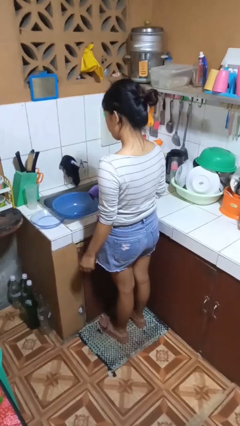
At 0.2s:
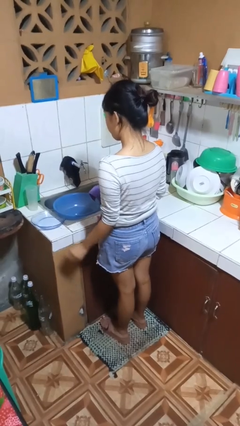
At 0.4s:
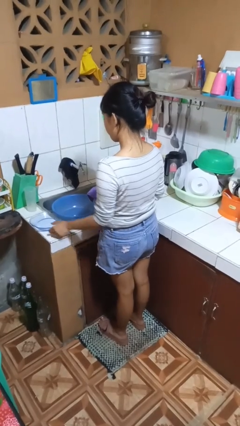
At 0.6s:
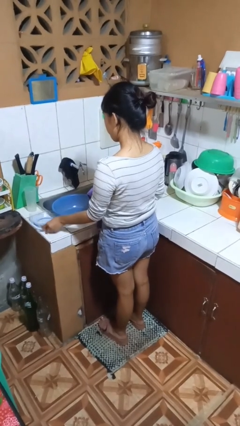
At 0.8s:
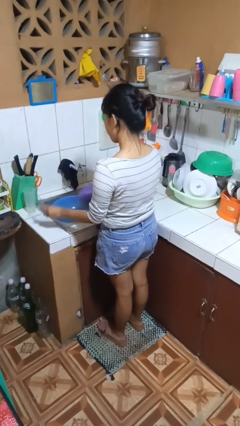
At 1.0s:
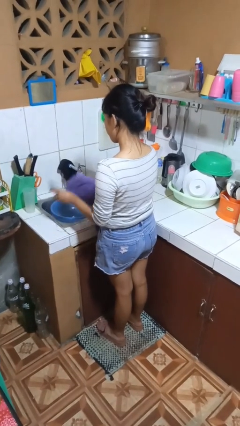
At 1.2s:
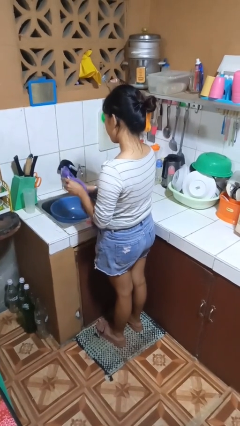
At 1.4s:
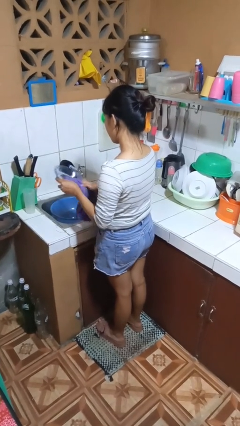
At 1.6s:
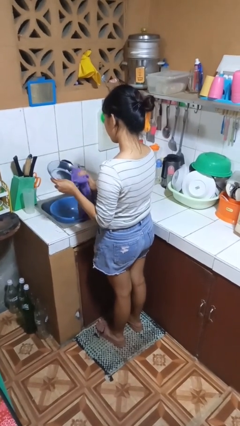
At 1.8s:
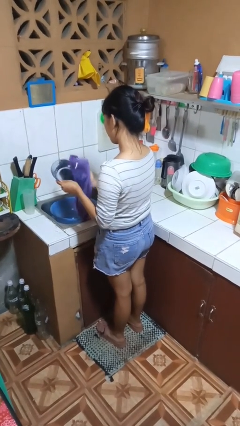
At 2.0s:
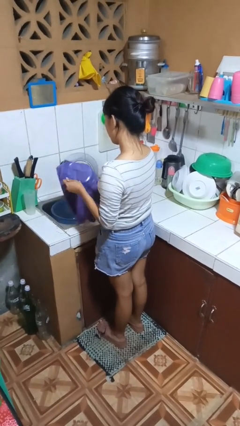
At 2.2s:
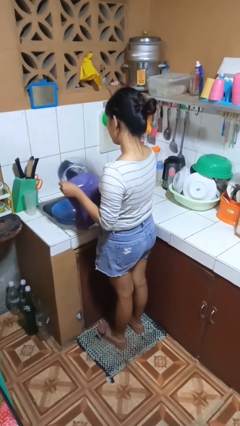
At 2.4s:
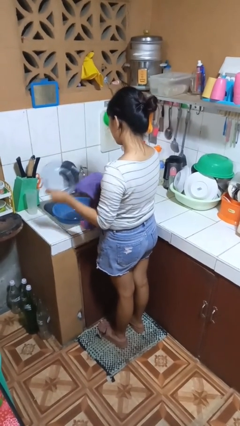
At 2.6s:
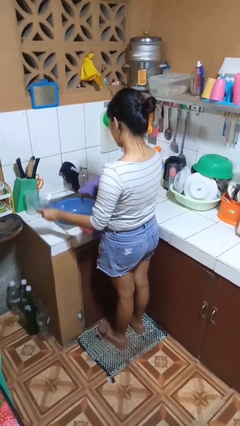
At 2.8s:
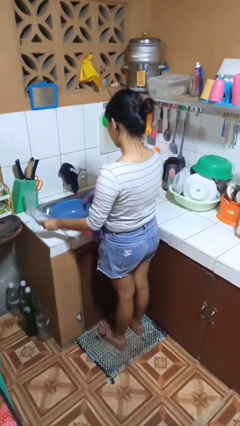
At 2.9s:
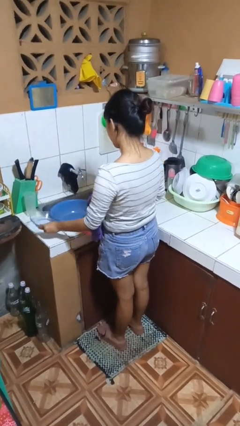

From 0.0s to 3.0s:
person dries dish

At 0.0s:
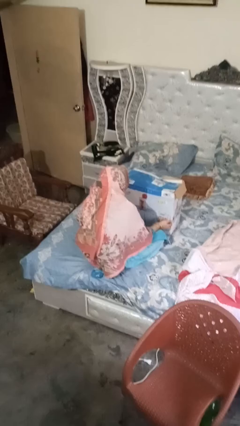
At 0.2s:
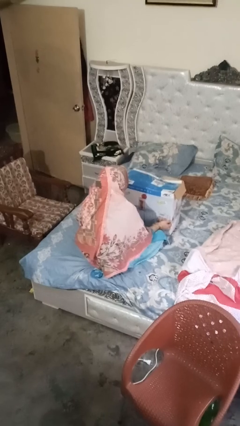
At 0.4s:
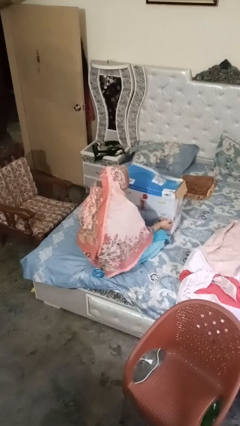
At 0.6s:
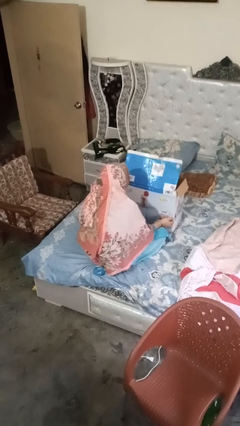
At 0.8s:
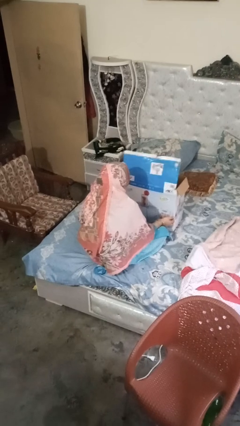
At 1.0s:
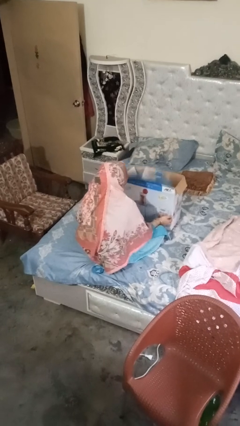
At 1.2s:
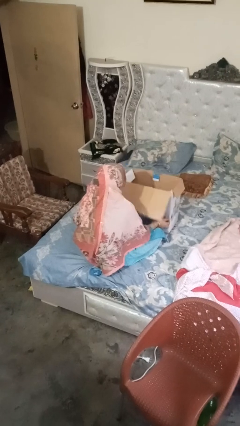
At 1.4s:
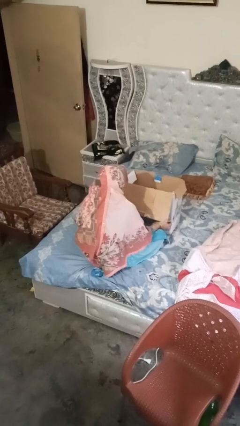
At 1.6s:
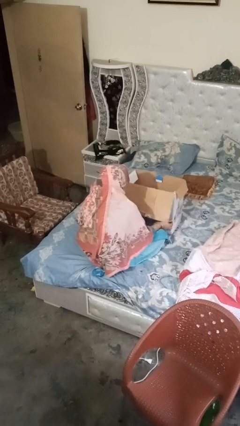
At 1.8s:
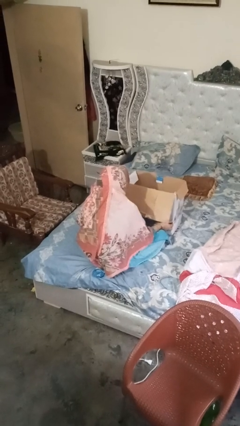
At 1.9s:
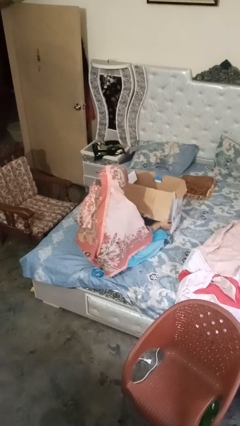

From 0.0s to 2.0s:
person opens box

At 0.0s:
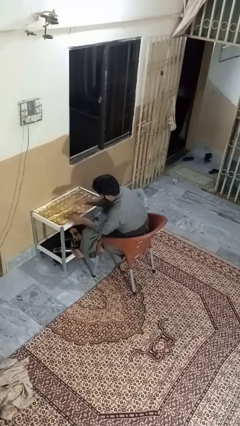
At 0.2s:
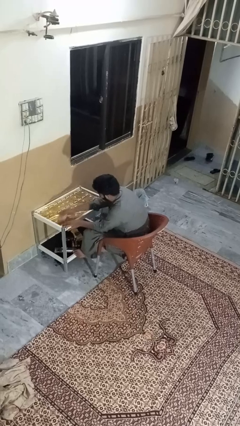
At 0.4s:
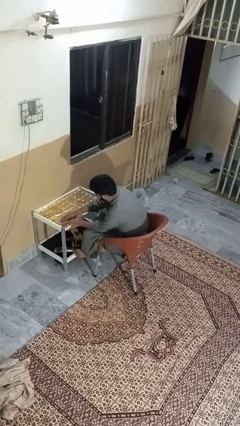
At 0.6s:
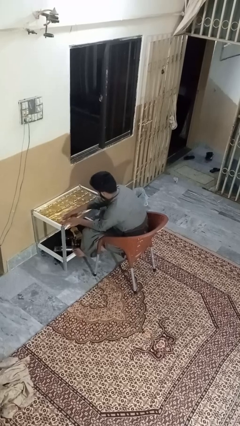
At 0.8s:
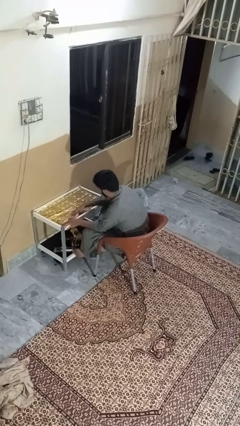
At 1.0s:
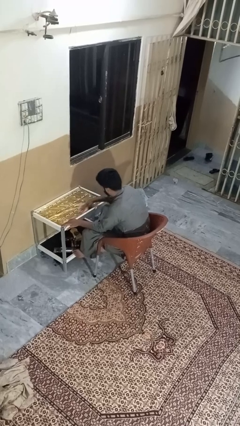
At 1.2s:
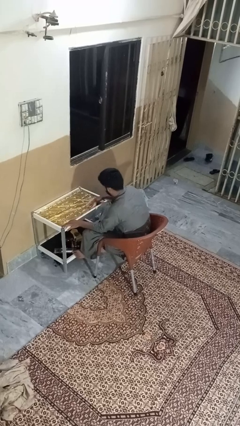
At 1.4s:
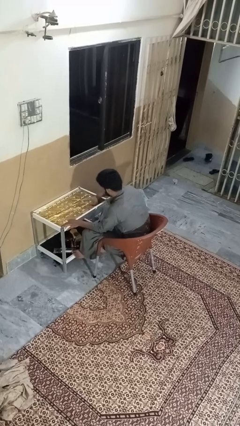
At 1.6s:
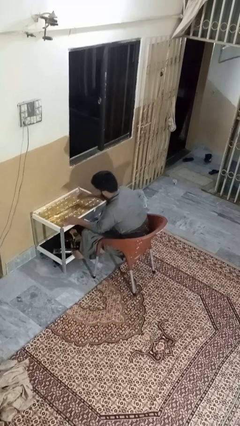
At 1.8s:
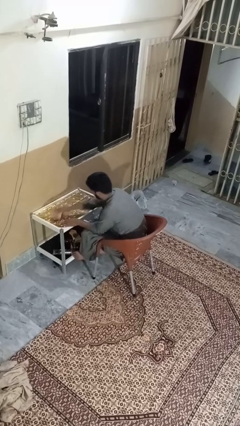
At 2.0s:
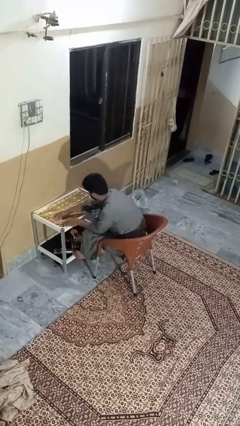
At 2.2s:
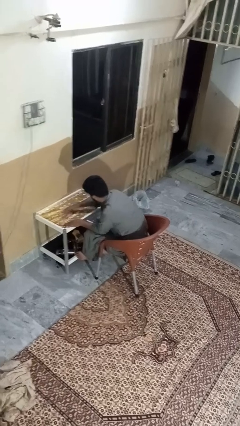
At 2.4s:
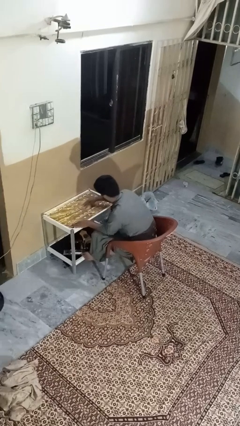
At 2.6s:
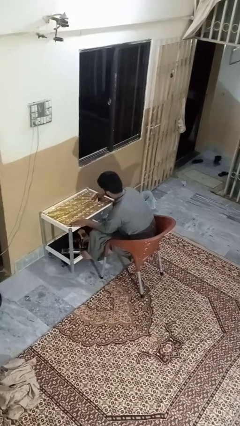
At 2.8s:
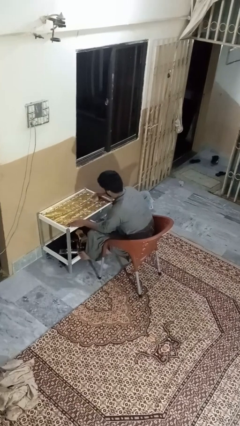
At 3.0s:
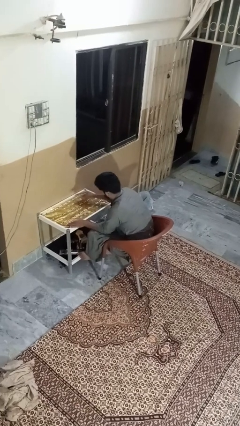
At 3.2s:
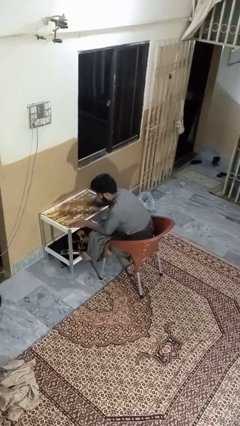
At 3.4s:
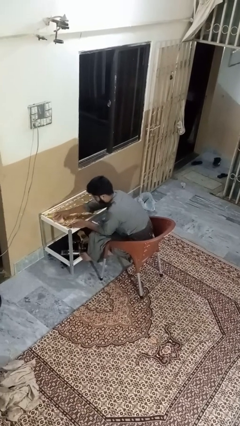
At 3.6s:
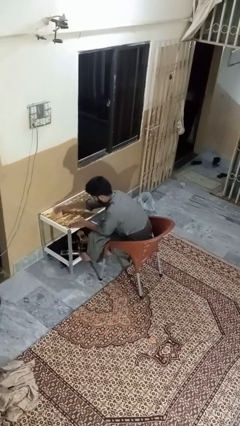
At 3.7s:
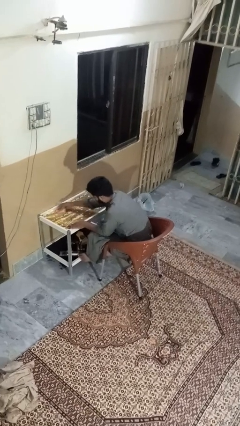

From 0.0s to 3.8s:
person cleans table with rag

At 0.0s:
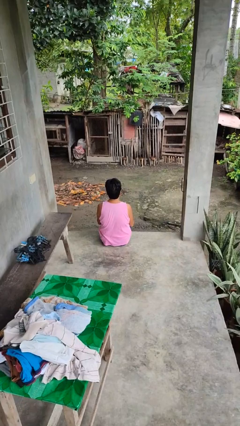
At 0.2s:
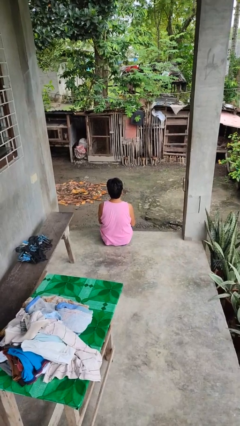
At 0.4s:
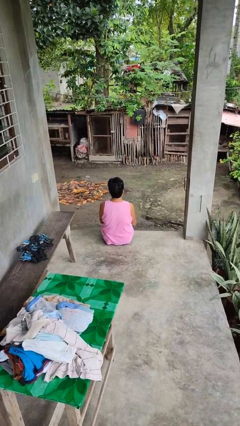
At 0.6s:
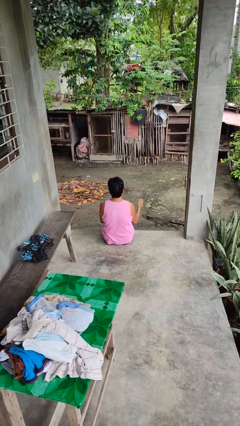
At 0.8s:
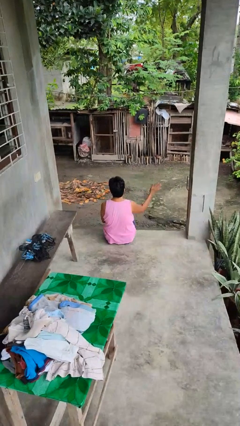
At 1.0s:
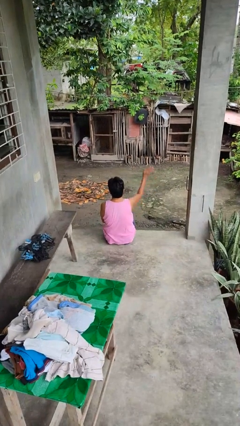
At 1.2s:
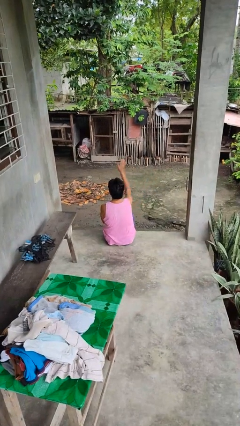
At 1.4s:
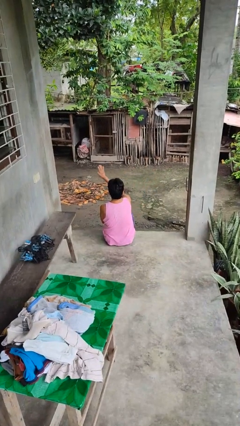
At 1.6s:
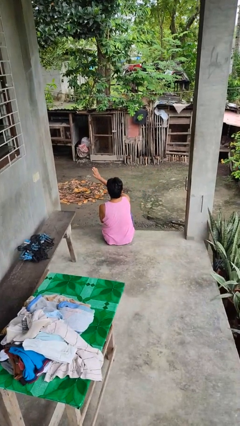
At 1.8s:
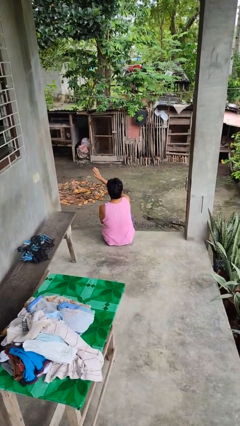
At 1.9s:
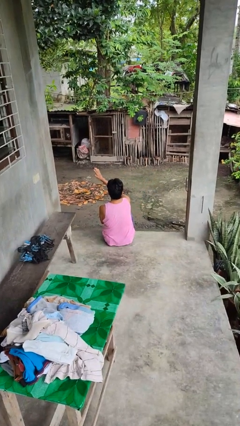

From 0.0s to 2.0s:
person gestures swipe left

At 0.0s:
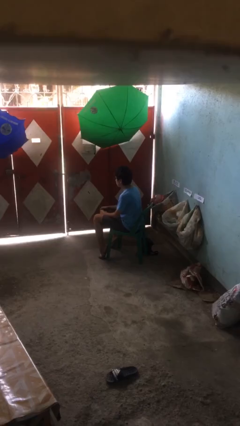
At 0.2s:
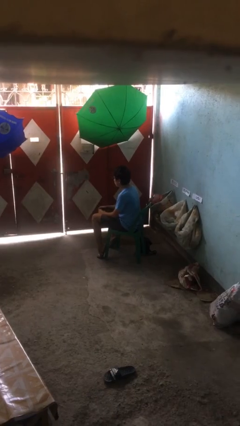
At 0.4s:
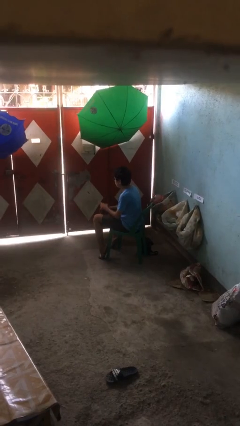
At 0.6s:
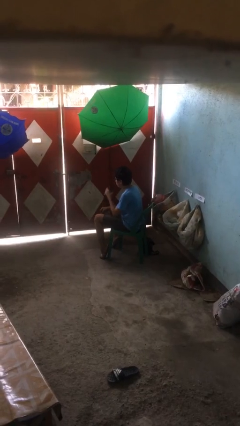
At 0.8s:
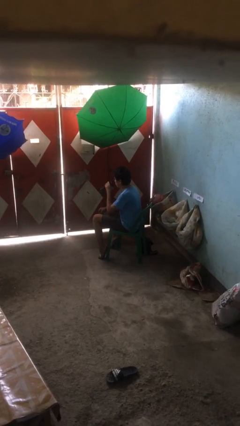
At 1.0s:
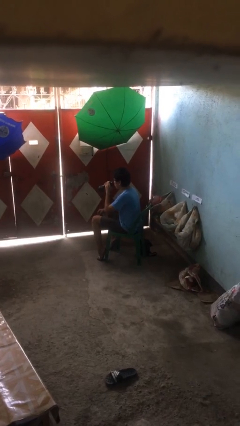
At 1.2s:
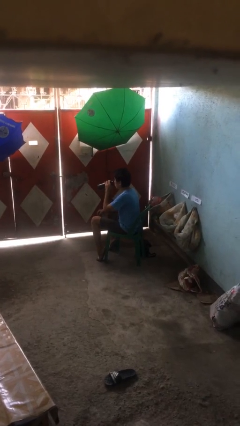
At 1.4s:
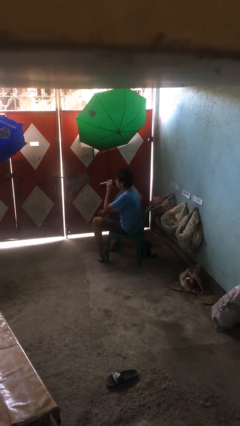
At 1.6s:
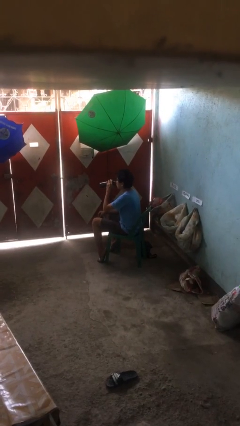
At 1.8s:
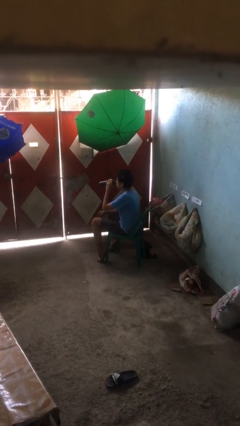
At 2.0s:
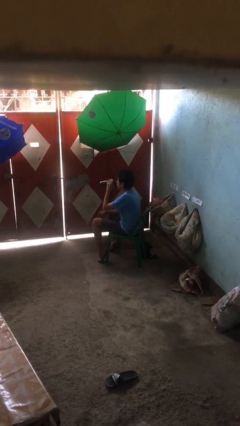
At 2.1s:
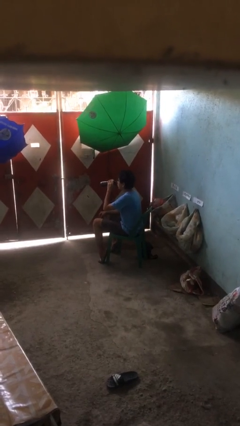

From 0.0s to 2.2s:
person drinks from bottle

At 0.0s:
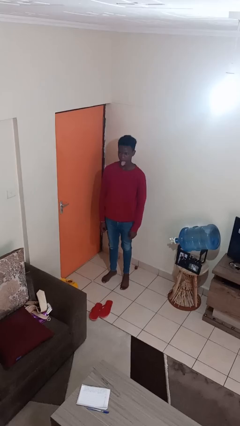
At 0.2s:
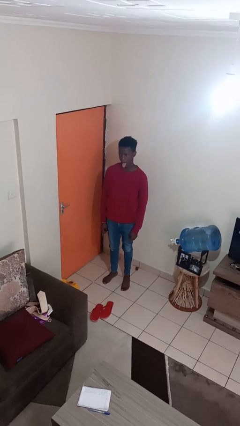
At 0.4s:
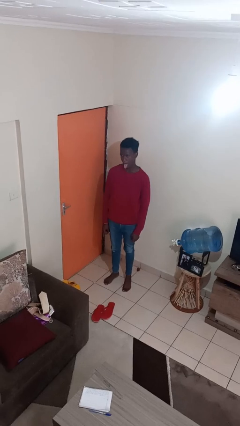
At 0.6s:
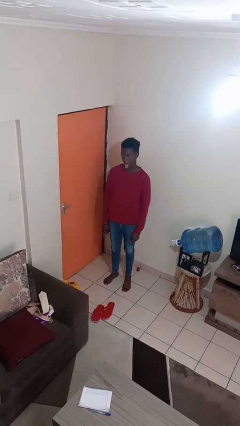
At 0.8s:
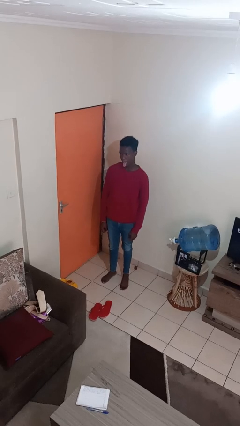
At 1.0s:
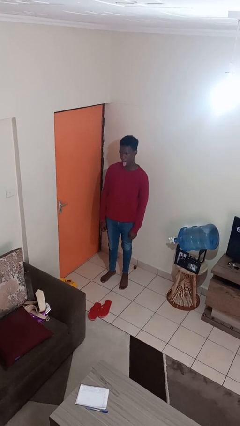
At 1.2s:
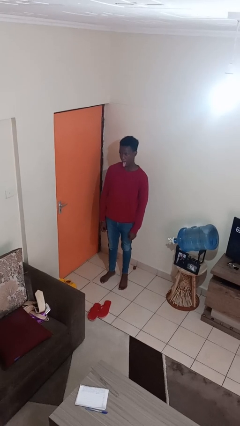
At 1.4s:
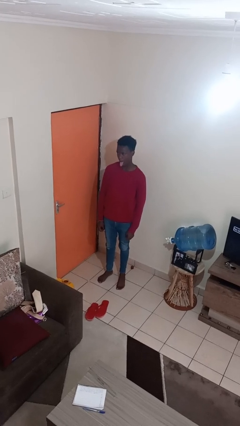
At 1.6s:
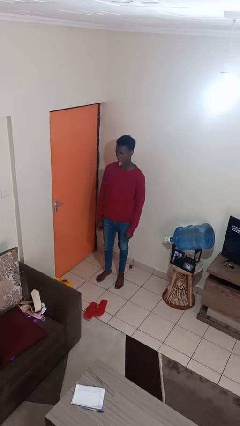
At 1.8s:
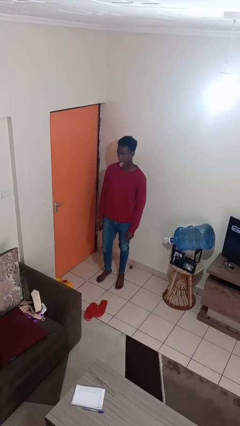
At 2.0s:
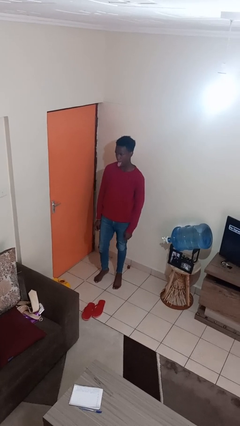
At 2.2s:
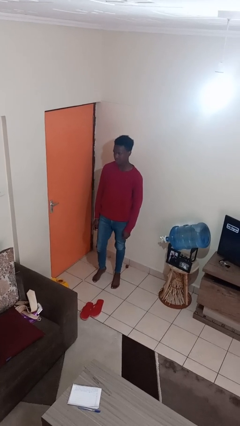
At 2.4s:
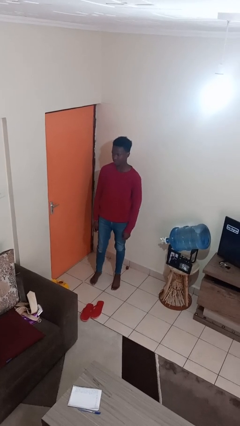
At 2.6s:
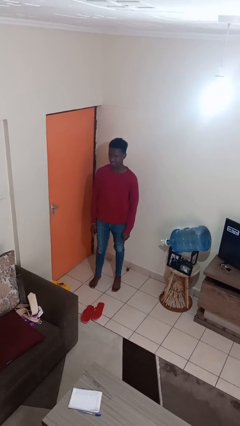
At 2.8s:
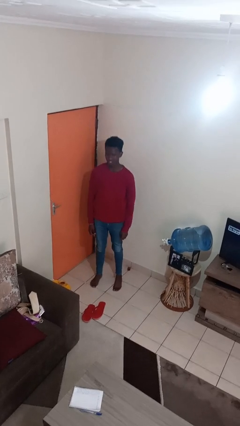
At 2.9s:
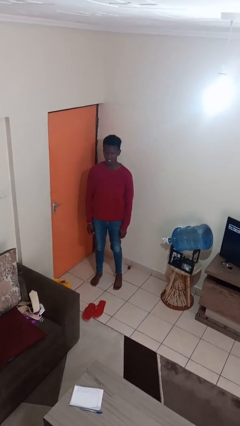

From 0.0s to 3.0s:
person sticks out tongue

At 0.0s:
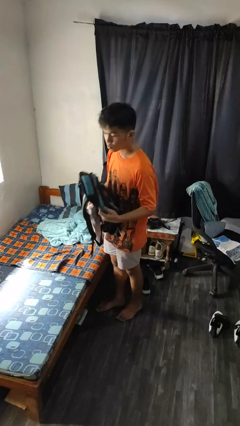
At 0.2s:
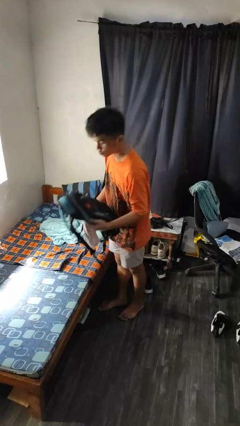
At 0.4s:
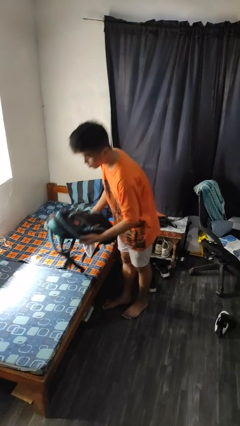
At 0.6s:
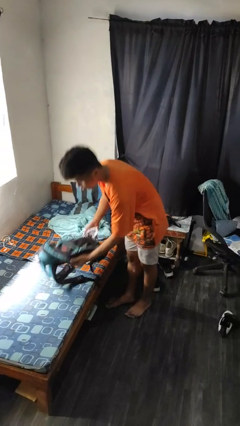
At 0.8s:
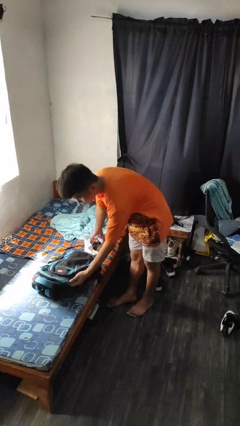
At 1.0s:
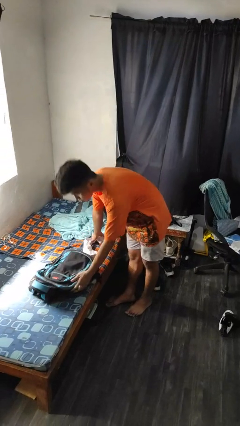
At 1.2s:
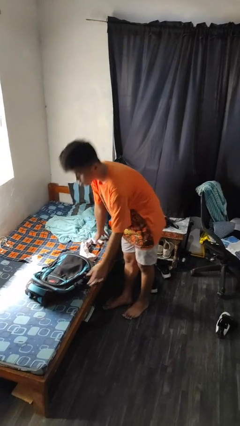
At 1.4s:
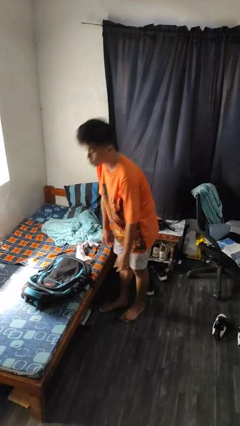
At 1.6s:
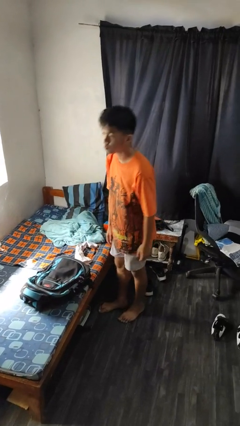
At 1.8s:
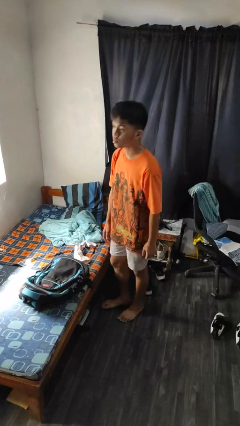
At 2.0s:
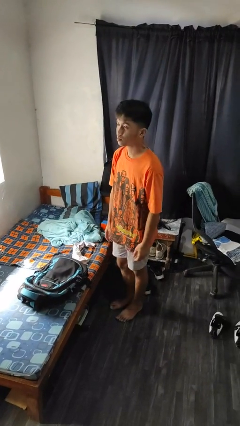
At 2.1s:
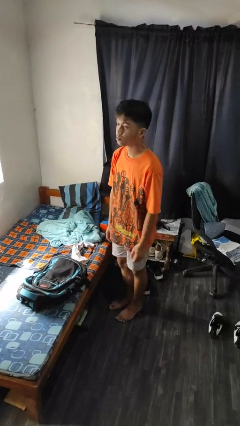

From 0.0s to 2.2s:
person puts down object on bed
